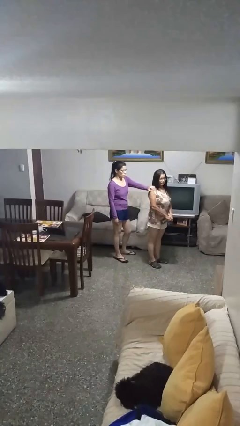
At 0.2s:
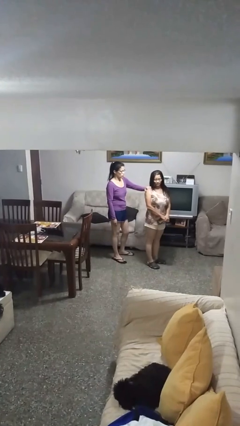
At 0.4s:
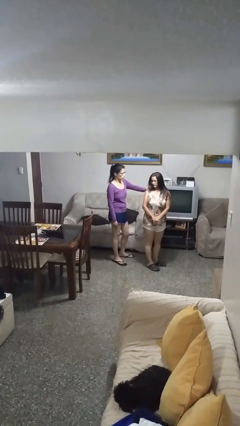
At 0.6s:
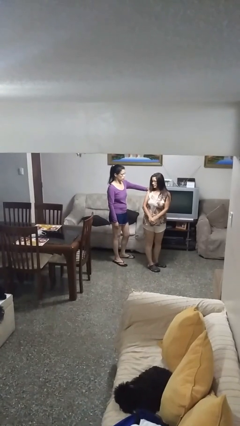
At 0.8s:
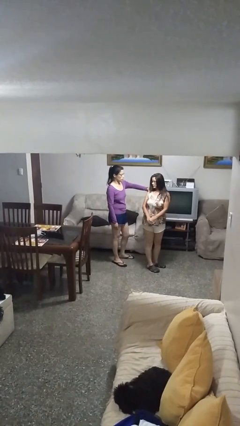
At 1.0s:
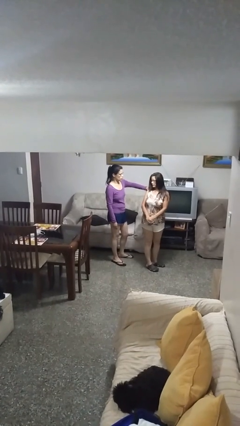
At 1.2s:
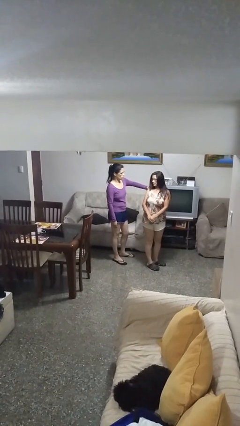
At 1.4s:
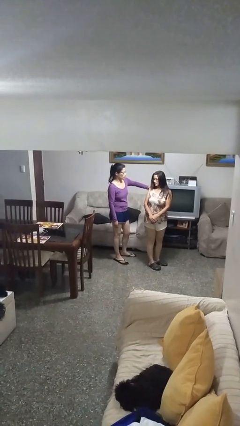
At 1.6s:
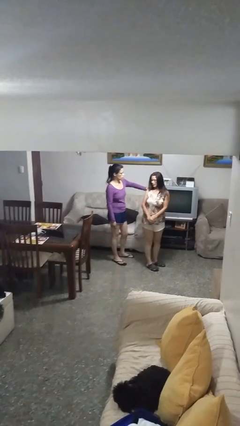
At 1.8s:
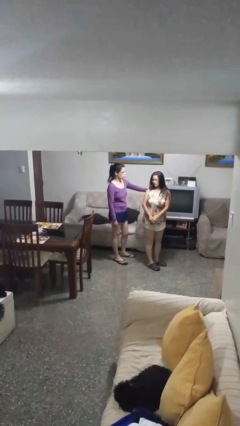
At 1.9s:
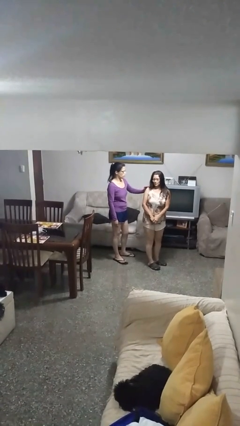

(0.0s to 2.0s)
person spins person around

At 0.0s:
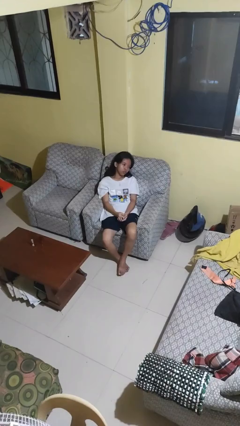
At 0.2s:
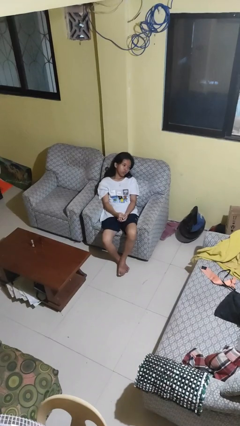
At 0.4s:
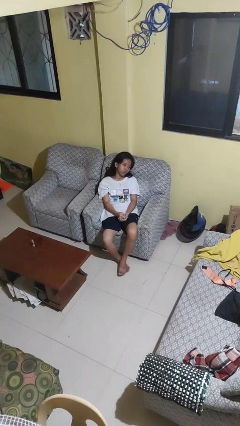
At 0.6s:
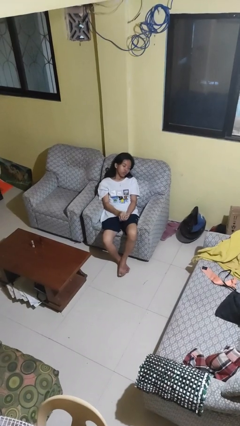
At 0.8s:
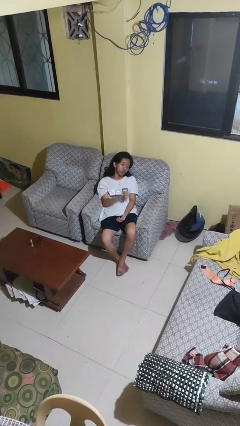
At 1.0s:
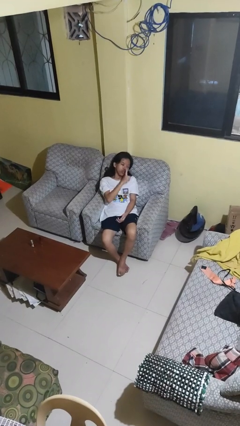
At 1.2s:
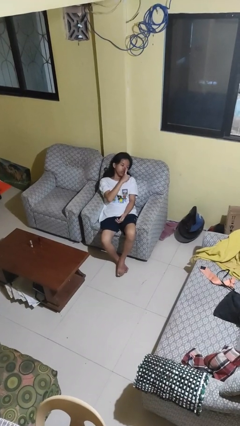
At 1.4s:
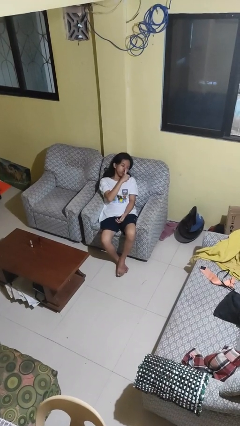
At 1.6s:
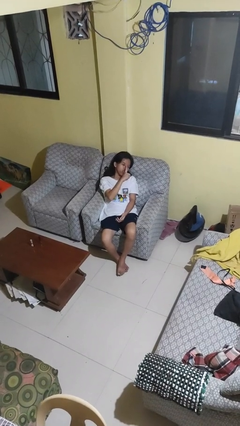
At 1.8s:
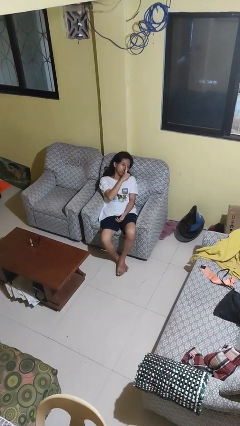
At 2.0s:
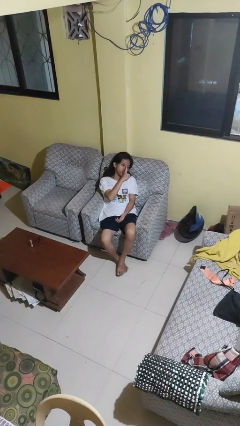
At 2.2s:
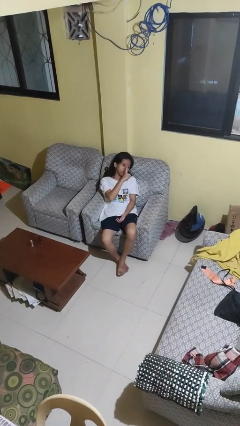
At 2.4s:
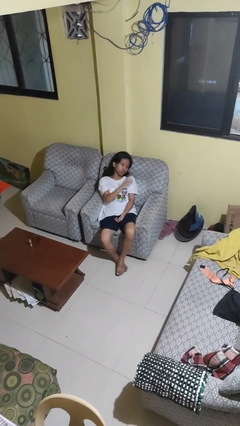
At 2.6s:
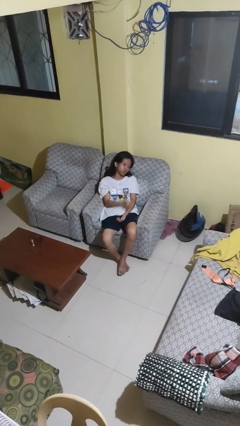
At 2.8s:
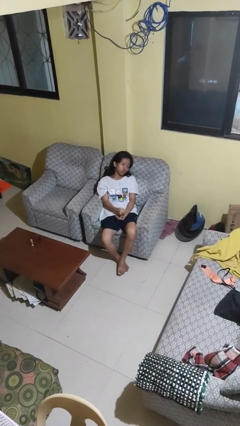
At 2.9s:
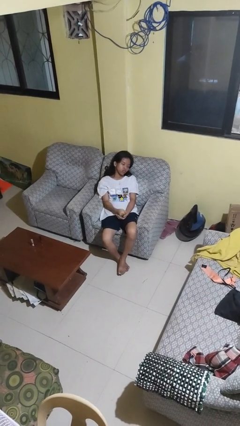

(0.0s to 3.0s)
person gestures be quiet

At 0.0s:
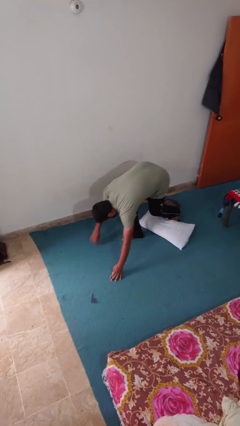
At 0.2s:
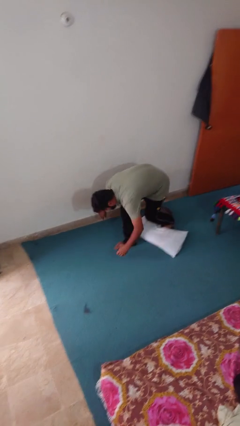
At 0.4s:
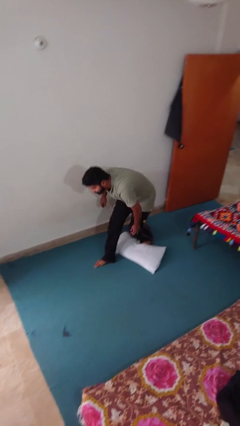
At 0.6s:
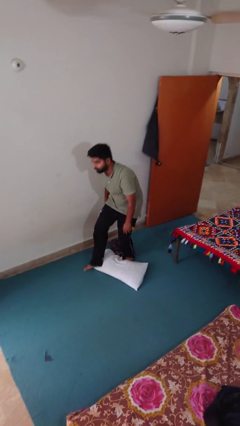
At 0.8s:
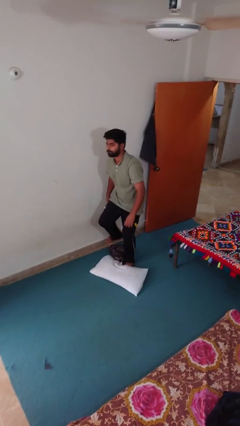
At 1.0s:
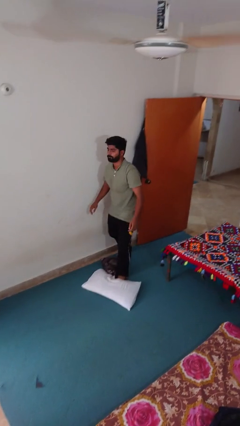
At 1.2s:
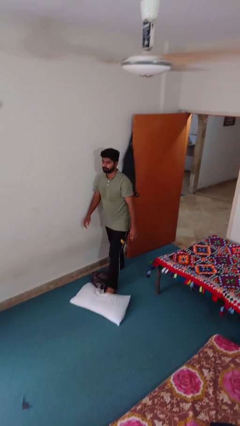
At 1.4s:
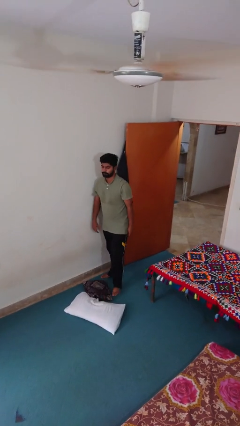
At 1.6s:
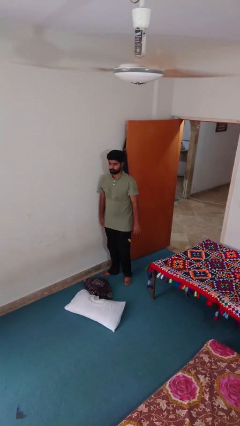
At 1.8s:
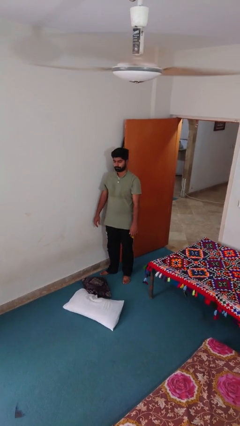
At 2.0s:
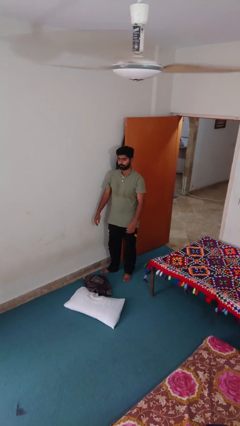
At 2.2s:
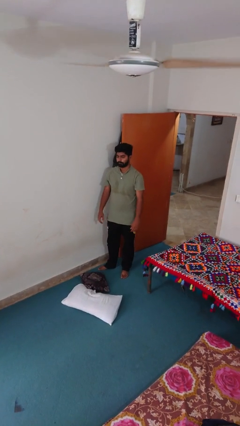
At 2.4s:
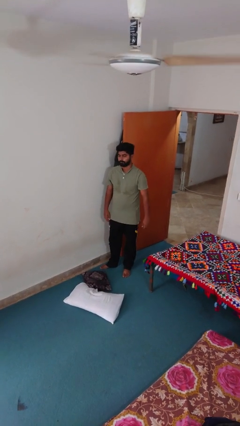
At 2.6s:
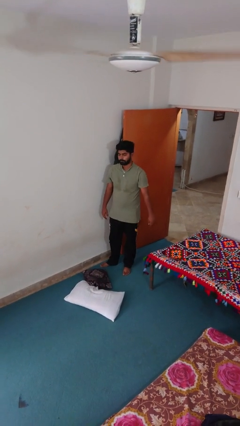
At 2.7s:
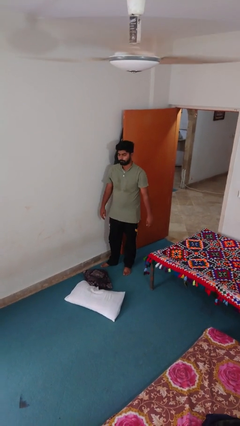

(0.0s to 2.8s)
person stands up from floor

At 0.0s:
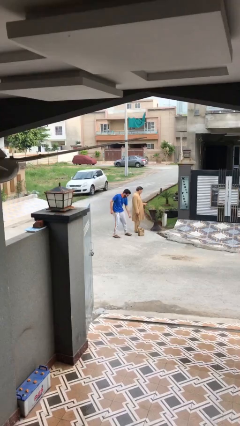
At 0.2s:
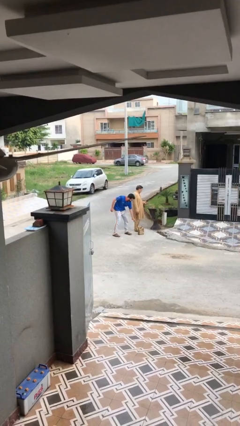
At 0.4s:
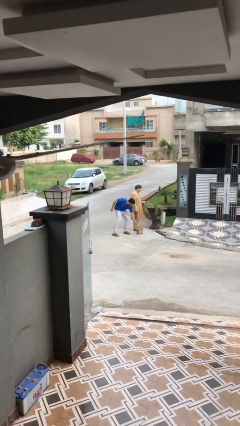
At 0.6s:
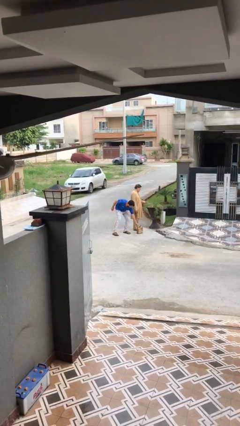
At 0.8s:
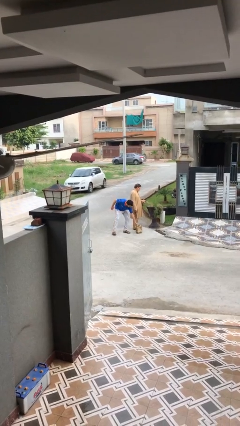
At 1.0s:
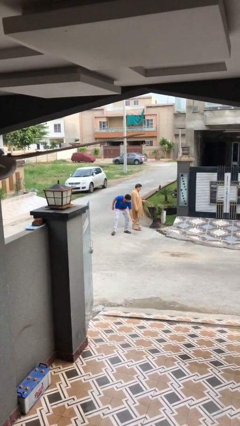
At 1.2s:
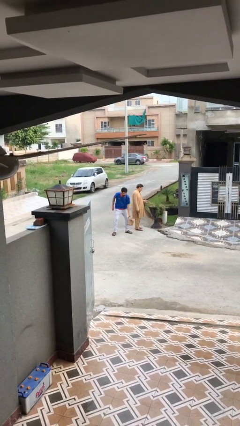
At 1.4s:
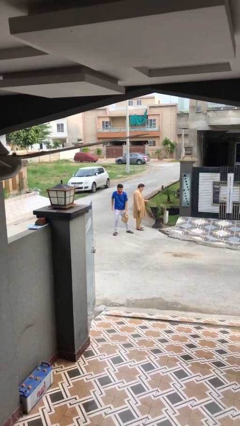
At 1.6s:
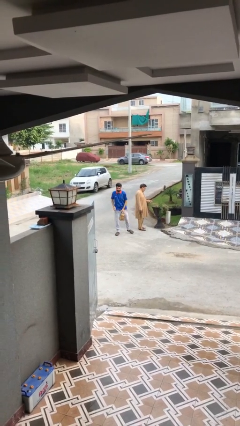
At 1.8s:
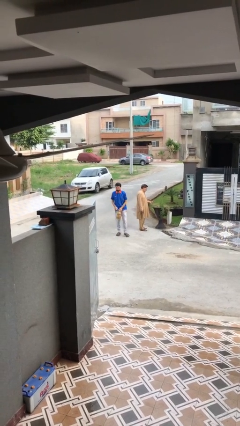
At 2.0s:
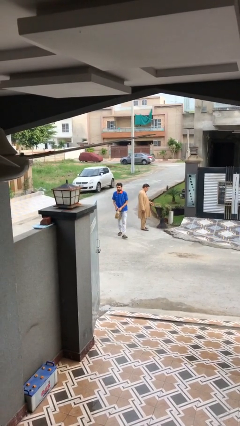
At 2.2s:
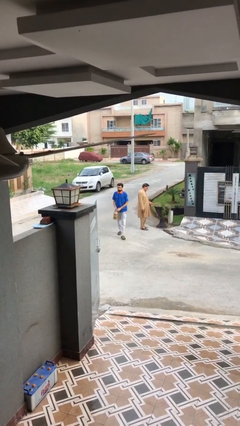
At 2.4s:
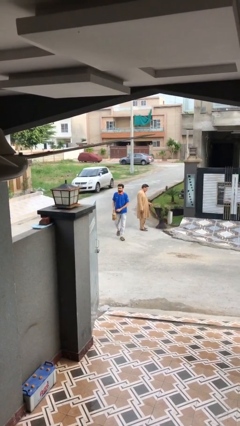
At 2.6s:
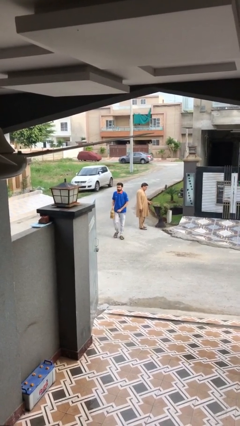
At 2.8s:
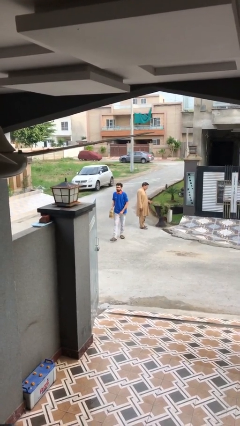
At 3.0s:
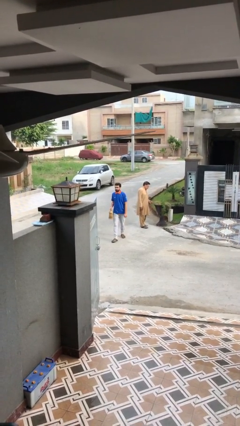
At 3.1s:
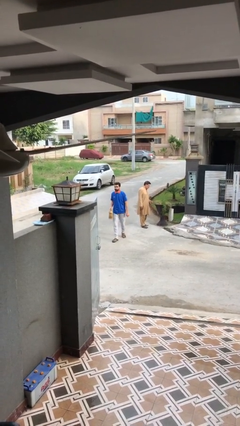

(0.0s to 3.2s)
person steals object from person

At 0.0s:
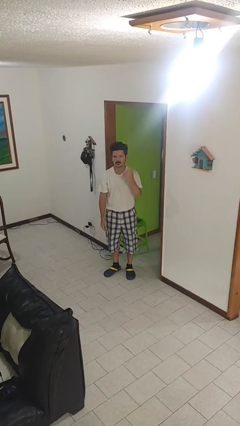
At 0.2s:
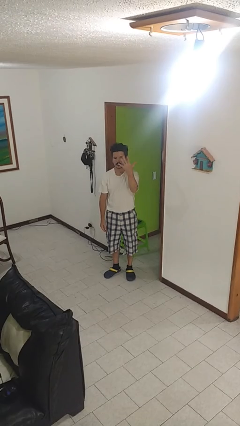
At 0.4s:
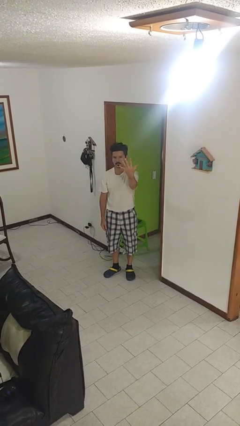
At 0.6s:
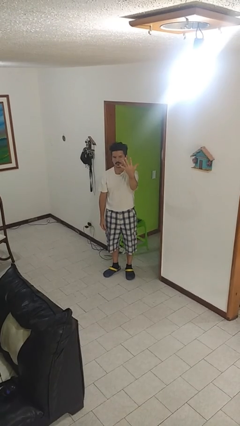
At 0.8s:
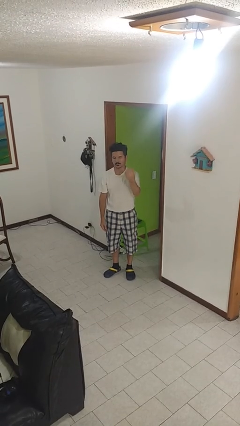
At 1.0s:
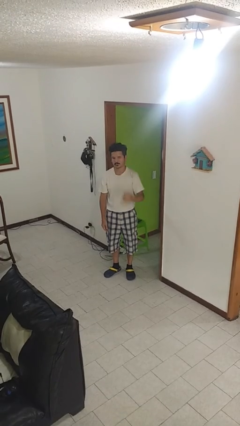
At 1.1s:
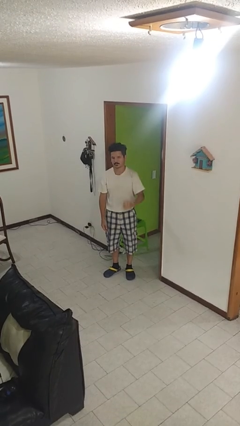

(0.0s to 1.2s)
person gestures number five

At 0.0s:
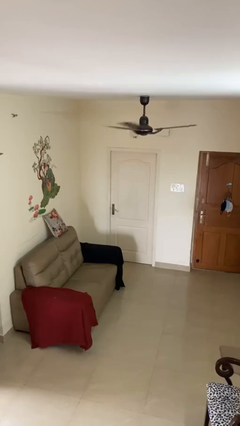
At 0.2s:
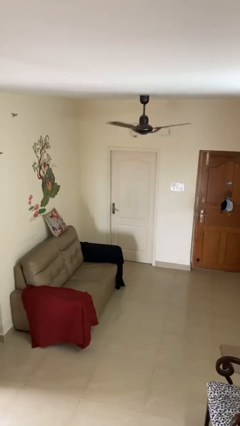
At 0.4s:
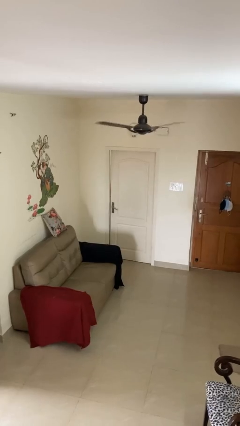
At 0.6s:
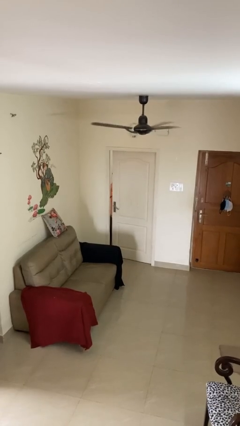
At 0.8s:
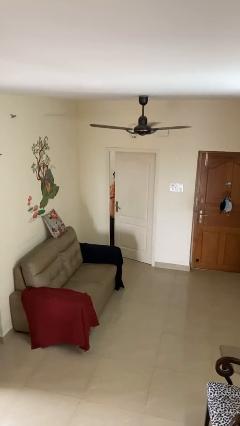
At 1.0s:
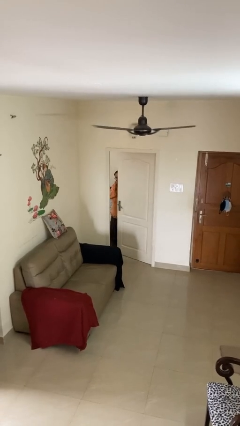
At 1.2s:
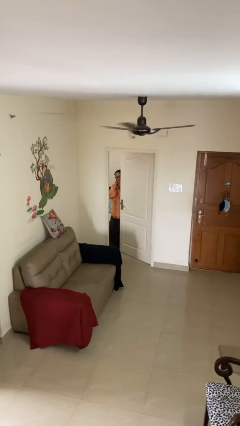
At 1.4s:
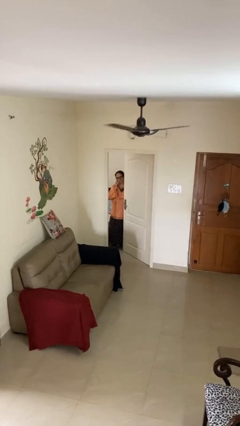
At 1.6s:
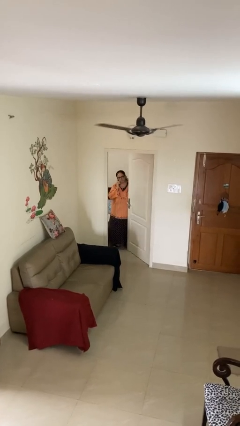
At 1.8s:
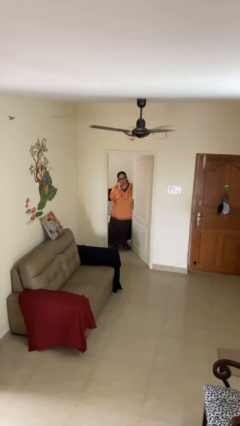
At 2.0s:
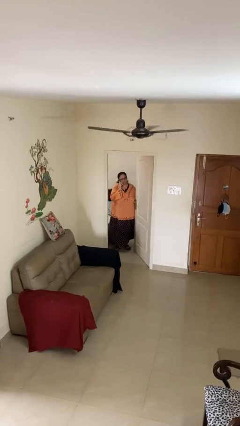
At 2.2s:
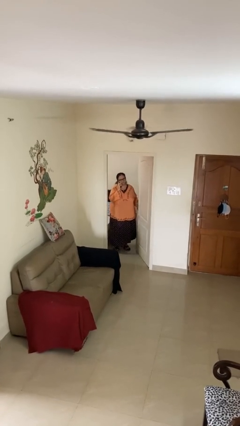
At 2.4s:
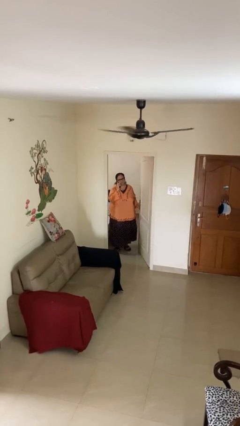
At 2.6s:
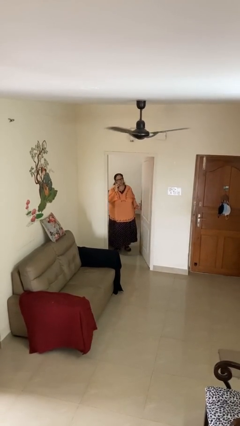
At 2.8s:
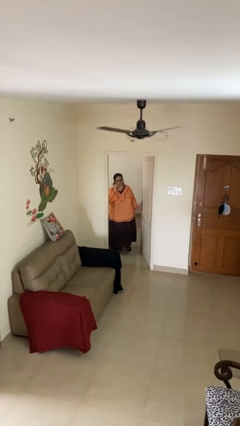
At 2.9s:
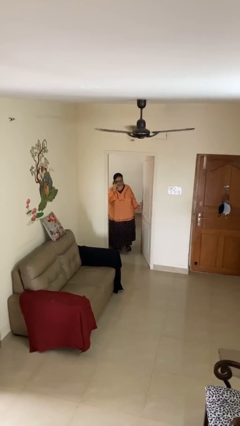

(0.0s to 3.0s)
person opens facility door

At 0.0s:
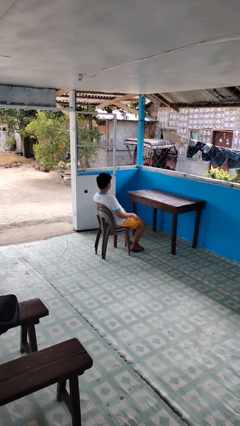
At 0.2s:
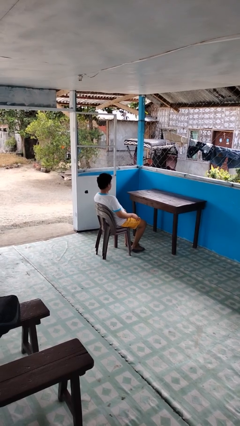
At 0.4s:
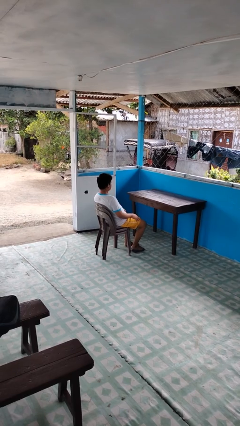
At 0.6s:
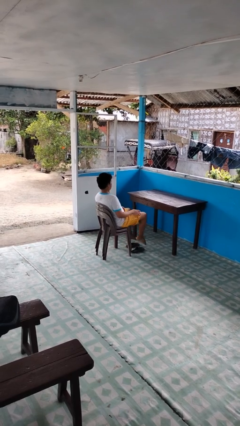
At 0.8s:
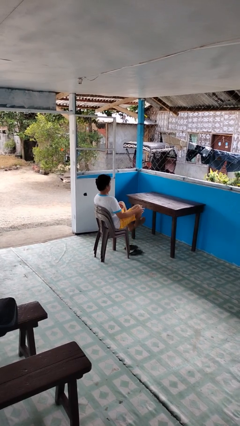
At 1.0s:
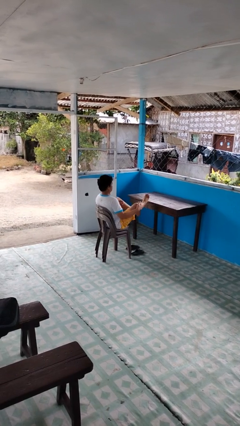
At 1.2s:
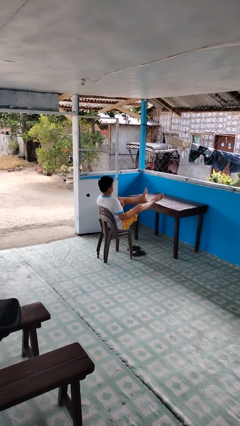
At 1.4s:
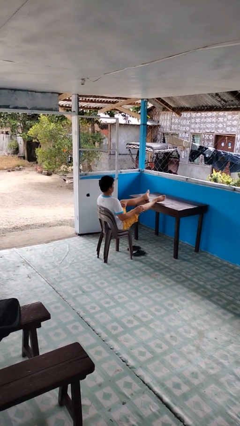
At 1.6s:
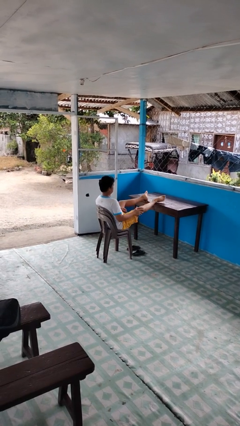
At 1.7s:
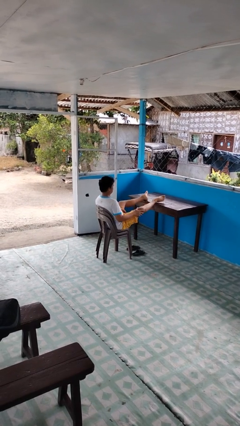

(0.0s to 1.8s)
person puts feet up
